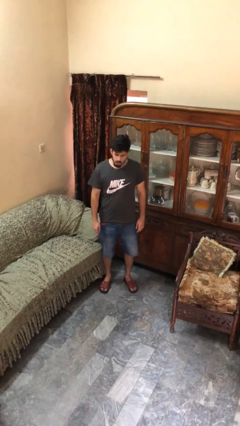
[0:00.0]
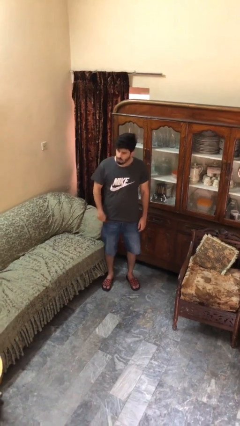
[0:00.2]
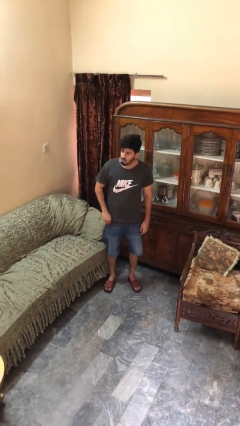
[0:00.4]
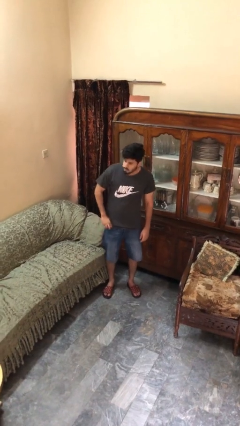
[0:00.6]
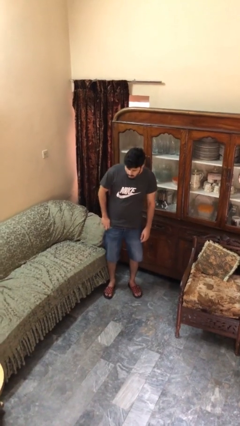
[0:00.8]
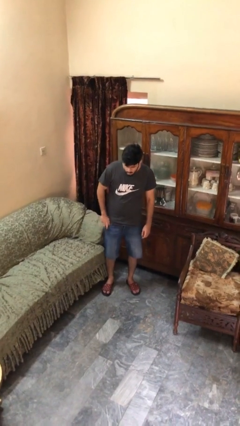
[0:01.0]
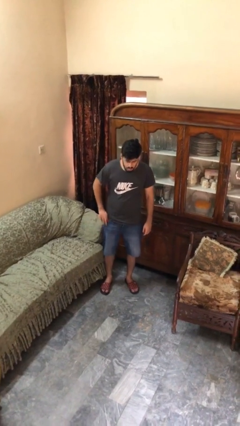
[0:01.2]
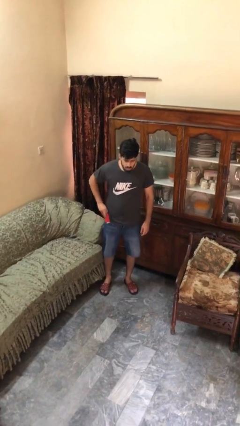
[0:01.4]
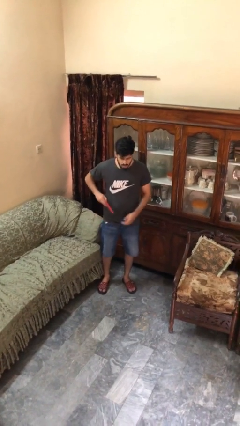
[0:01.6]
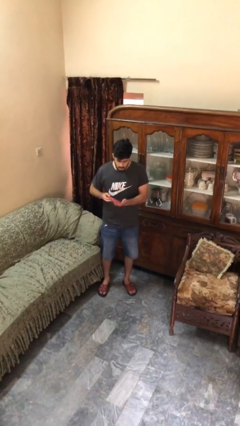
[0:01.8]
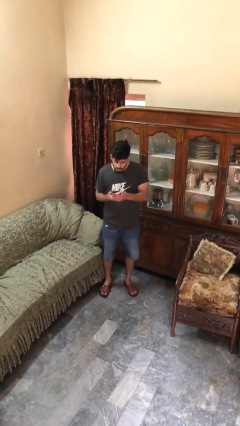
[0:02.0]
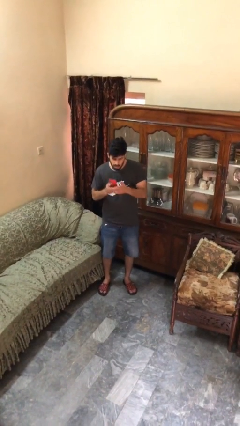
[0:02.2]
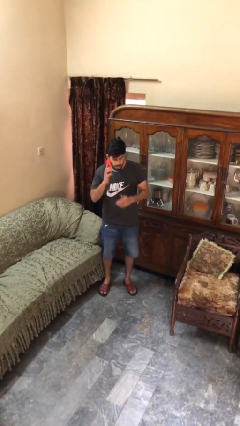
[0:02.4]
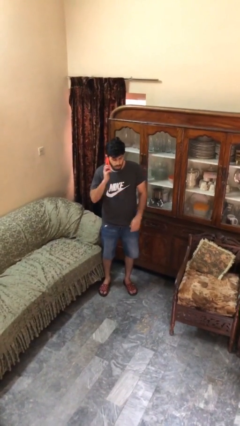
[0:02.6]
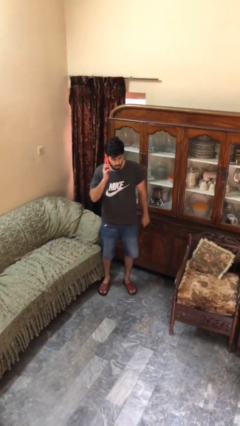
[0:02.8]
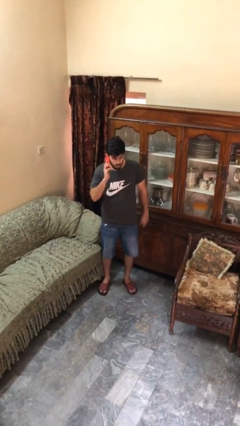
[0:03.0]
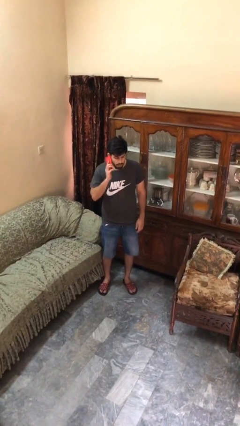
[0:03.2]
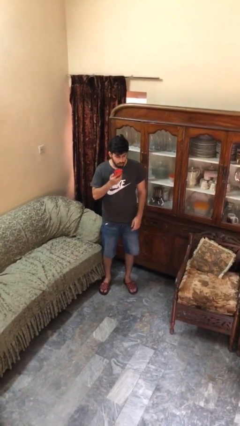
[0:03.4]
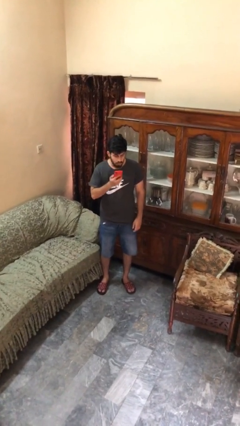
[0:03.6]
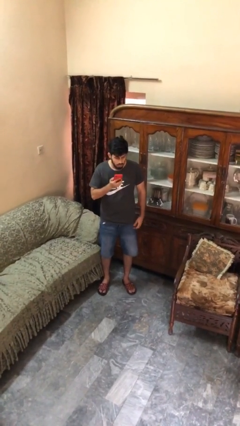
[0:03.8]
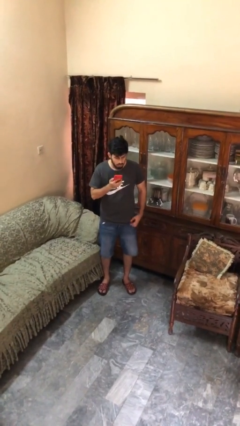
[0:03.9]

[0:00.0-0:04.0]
person takes phone from pocket

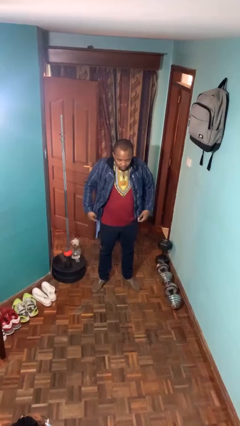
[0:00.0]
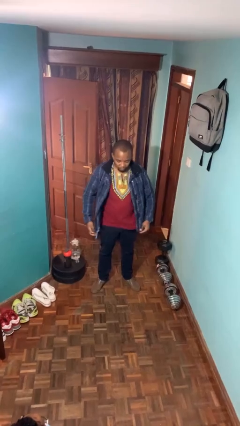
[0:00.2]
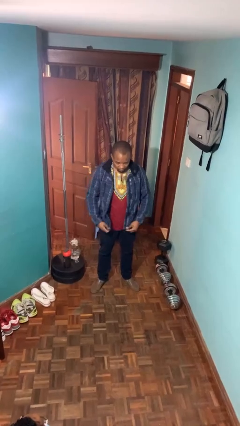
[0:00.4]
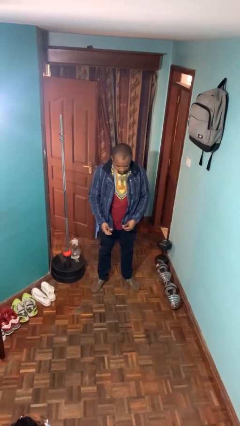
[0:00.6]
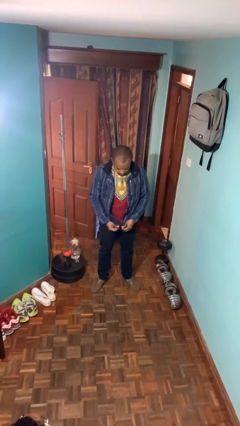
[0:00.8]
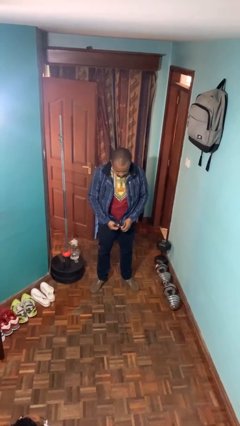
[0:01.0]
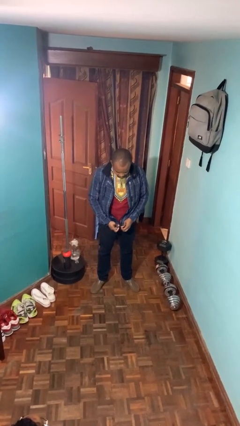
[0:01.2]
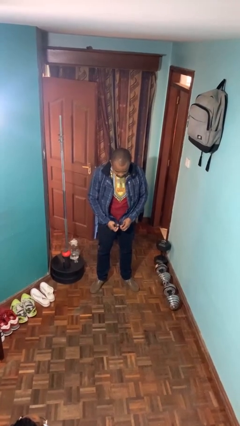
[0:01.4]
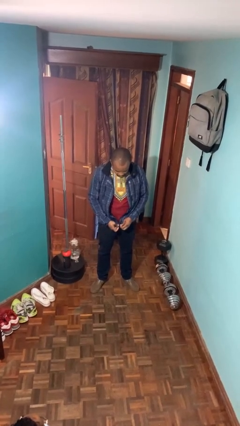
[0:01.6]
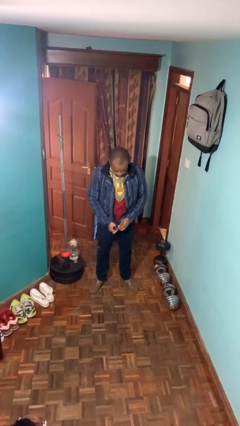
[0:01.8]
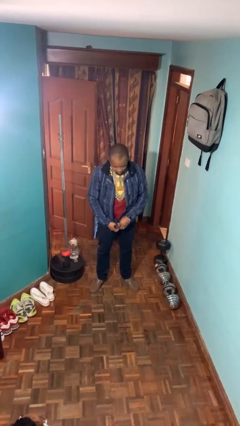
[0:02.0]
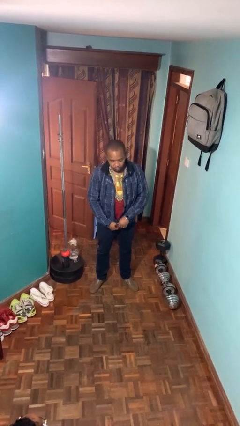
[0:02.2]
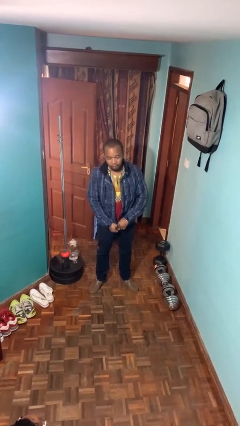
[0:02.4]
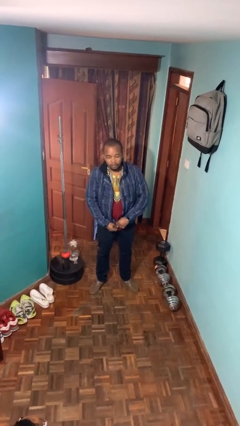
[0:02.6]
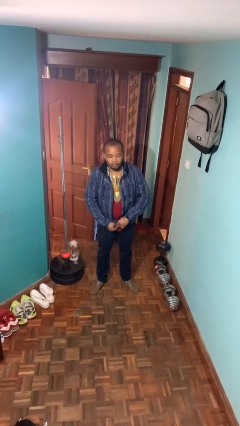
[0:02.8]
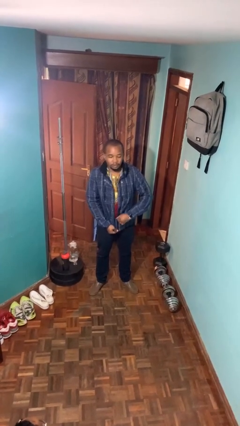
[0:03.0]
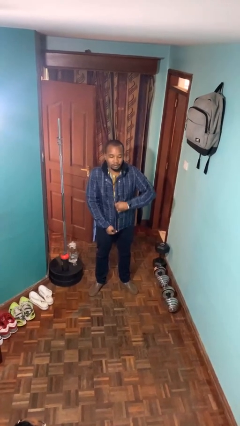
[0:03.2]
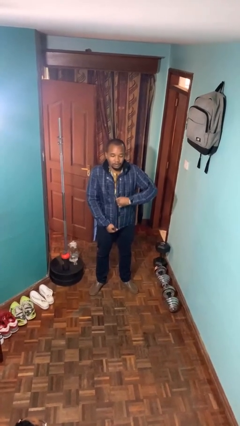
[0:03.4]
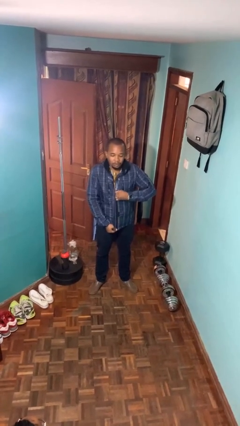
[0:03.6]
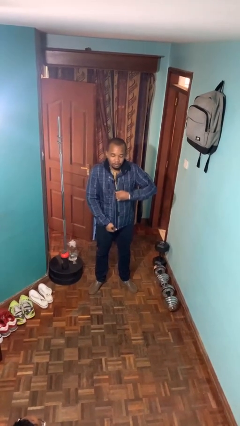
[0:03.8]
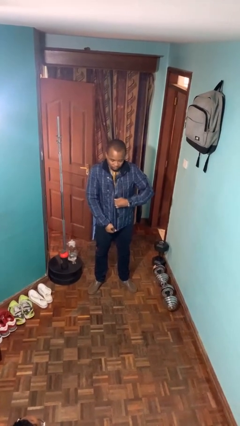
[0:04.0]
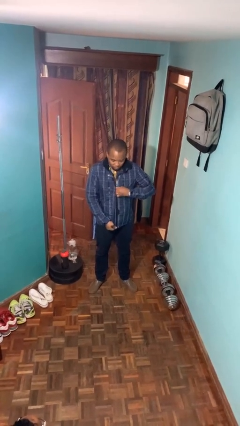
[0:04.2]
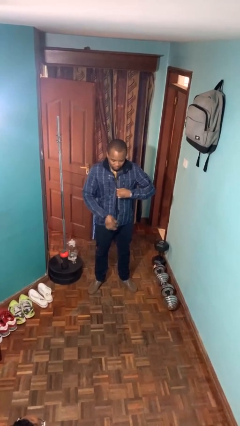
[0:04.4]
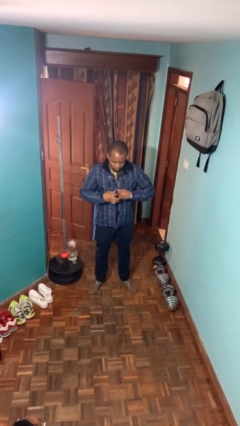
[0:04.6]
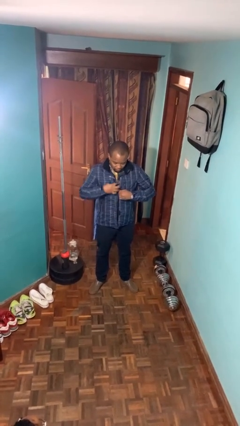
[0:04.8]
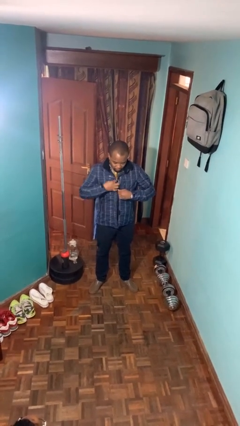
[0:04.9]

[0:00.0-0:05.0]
person zips up jacket

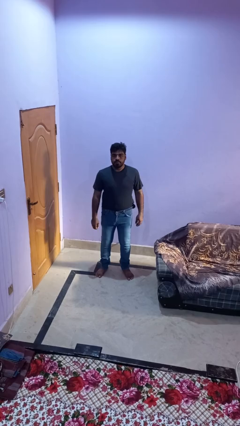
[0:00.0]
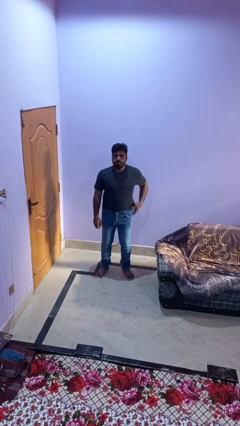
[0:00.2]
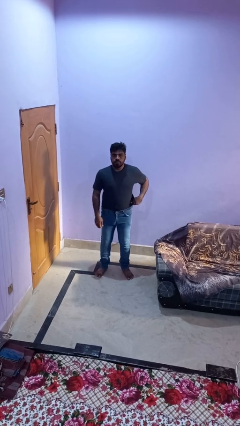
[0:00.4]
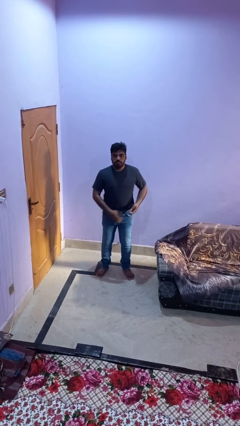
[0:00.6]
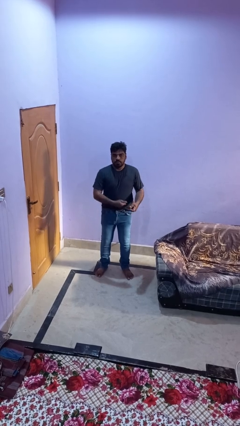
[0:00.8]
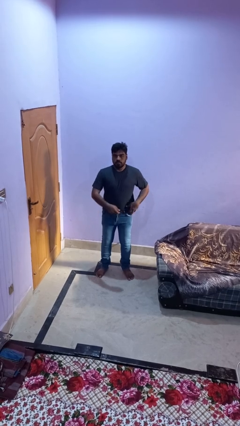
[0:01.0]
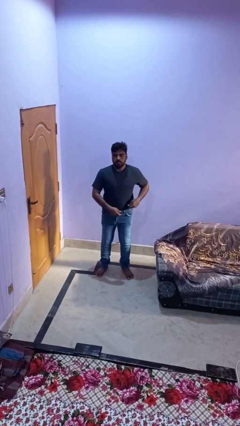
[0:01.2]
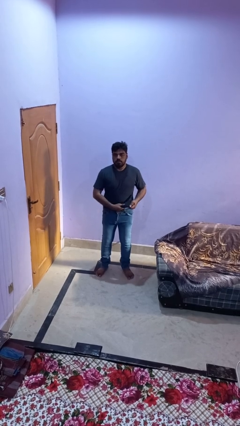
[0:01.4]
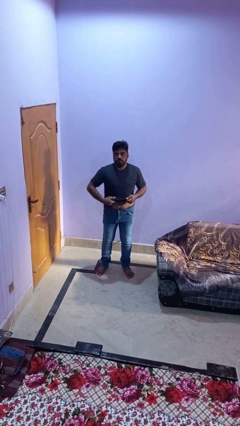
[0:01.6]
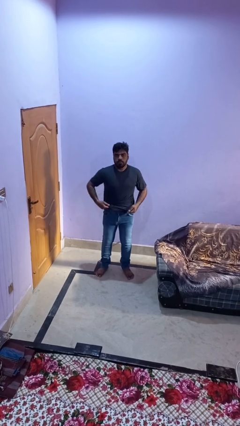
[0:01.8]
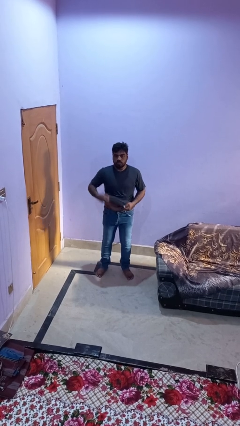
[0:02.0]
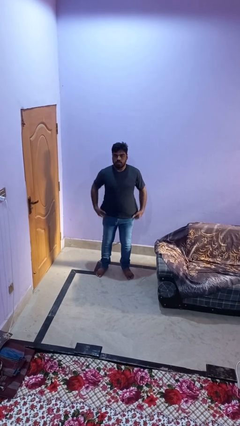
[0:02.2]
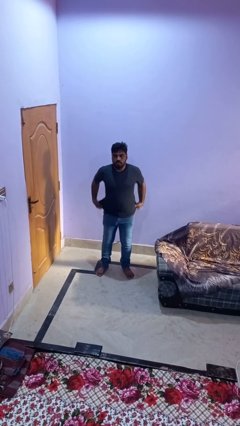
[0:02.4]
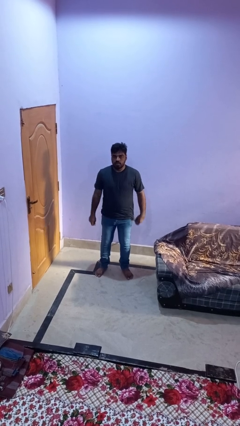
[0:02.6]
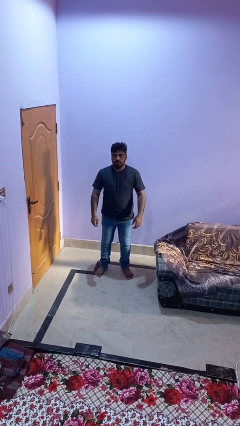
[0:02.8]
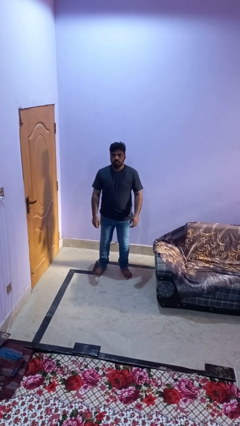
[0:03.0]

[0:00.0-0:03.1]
person untucks shirt

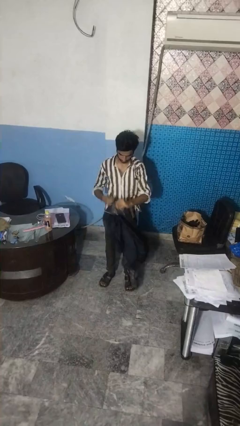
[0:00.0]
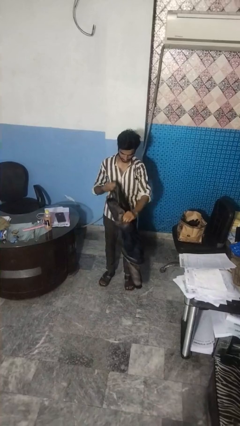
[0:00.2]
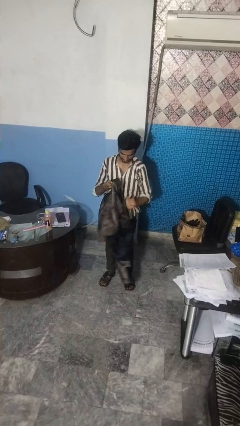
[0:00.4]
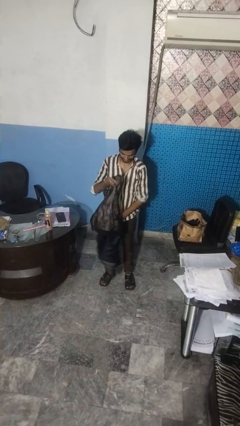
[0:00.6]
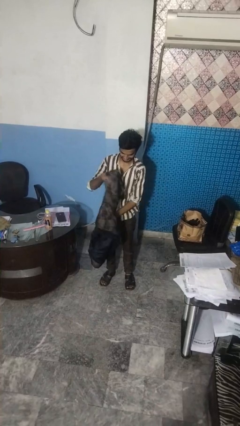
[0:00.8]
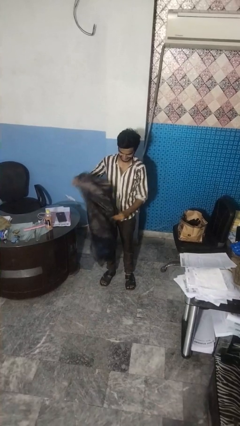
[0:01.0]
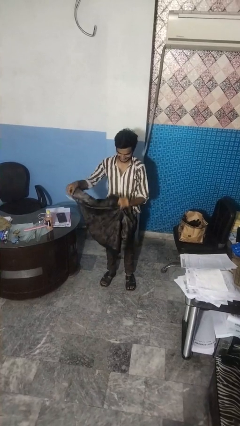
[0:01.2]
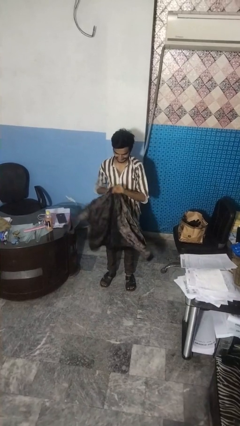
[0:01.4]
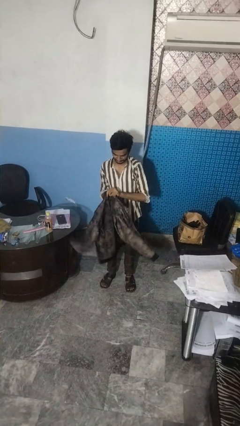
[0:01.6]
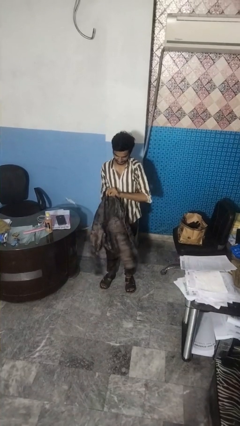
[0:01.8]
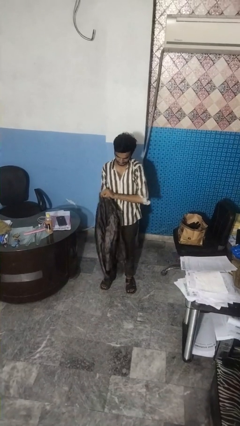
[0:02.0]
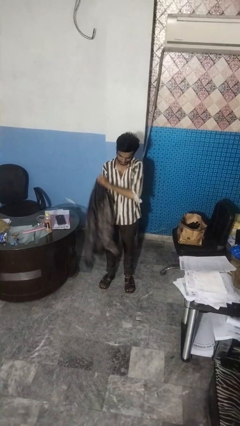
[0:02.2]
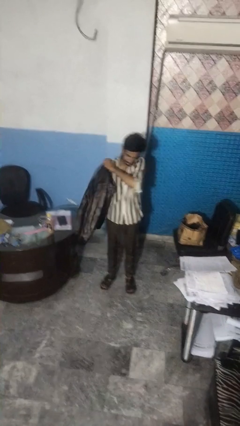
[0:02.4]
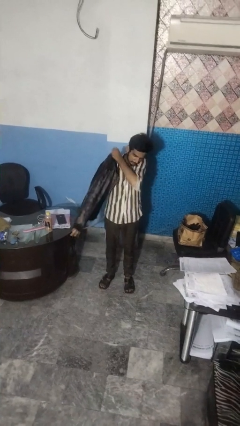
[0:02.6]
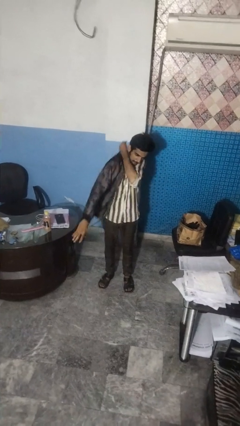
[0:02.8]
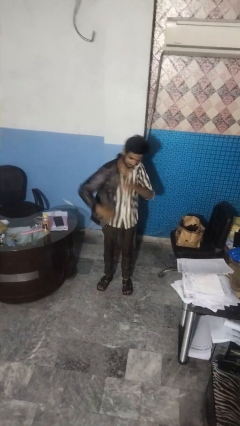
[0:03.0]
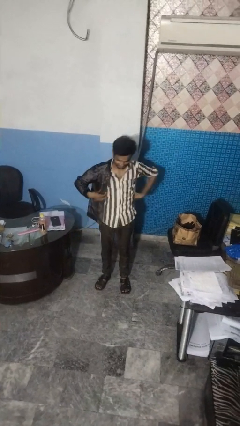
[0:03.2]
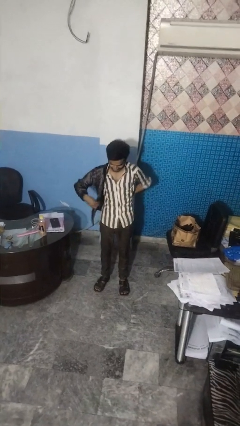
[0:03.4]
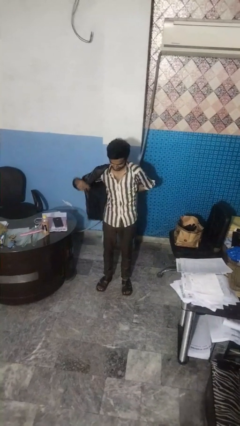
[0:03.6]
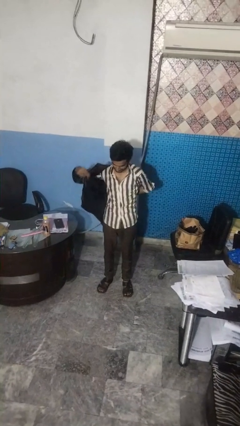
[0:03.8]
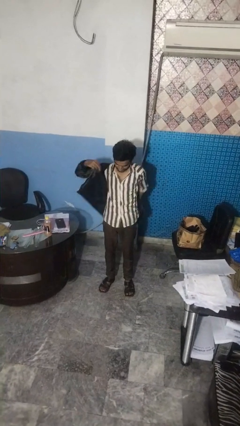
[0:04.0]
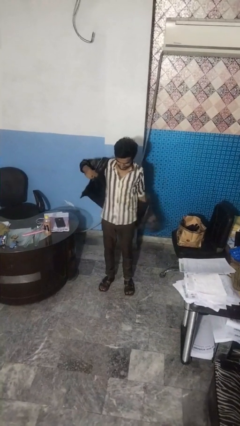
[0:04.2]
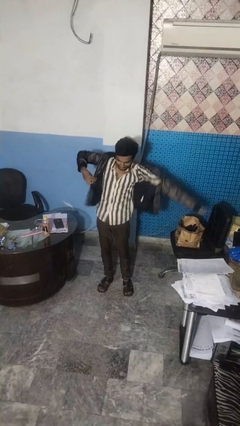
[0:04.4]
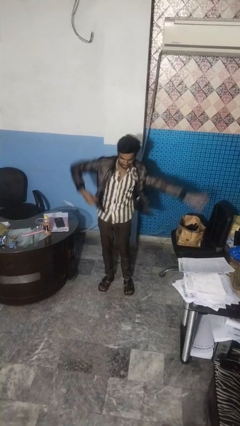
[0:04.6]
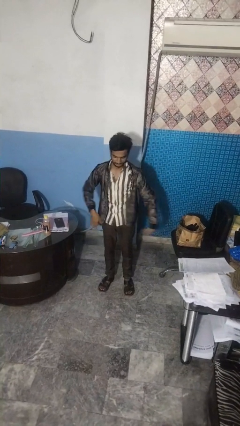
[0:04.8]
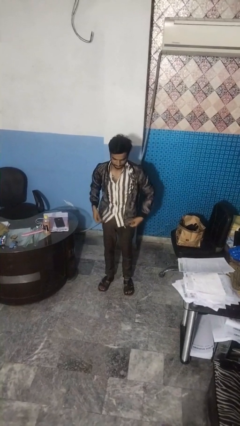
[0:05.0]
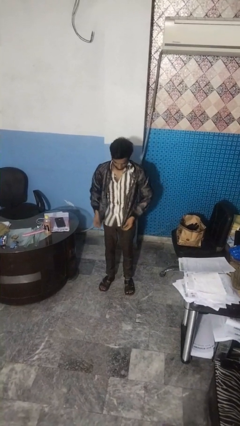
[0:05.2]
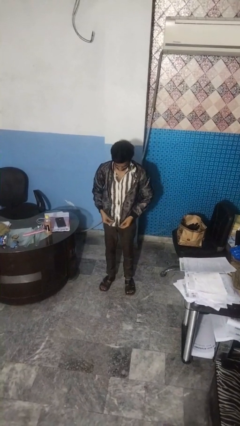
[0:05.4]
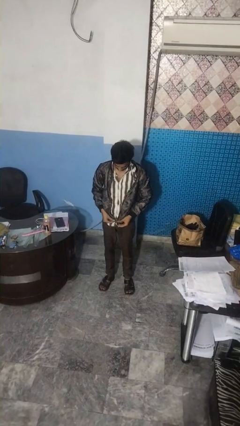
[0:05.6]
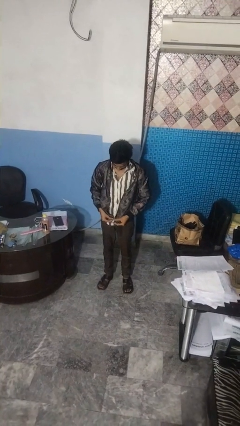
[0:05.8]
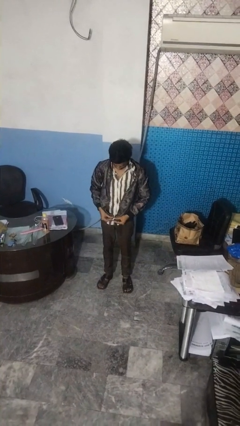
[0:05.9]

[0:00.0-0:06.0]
person puts on jacket
